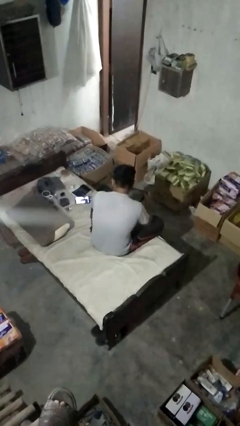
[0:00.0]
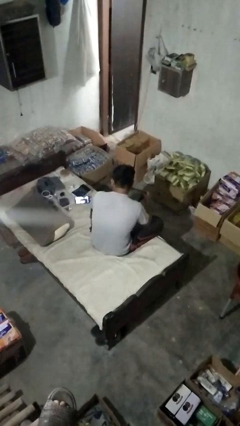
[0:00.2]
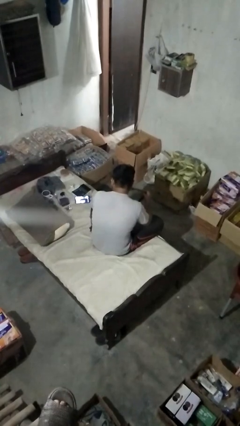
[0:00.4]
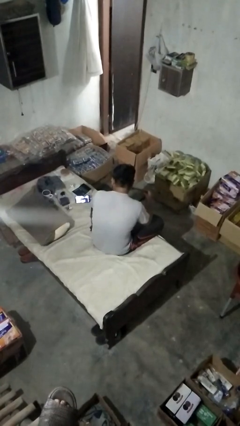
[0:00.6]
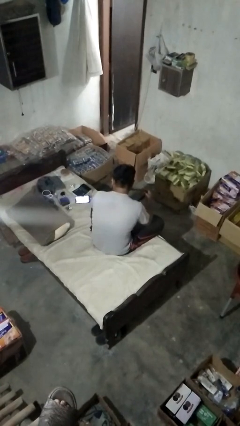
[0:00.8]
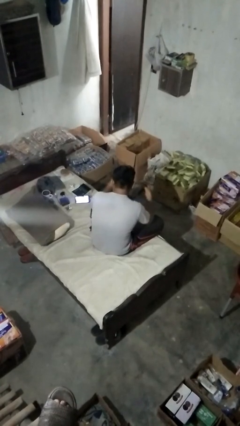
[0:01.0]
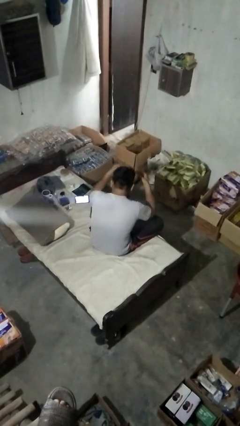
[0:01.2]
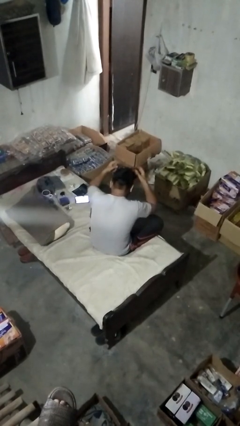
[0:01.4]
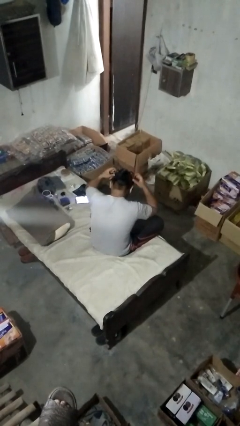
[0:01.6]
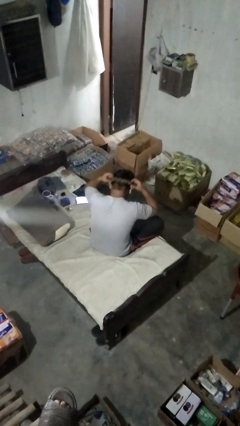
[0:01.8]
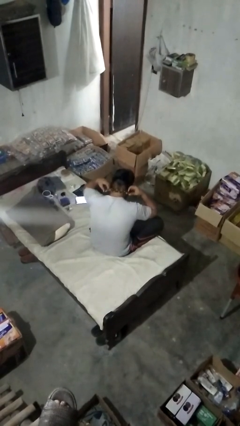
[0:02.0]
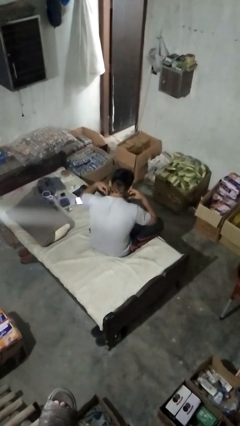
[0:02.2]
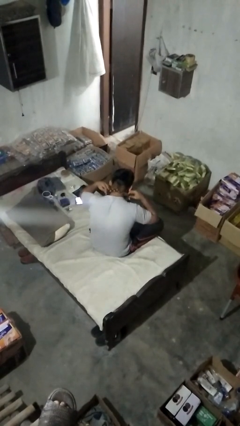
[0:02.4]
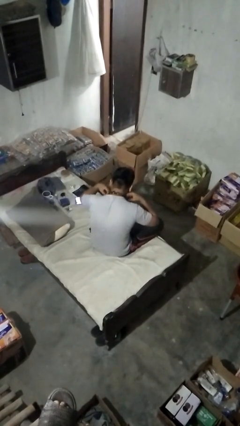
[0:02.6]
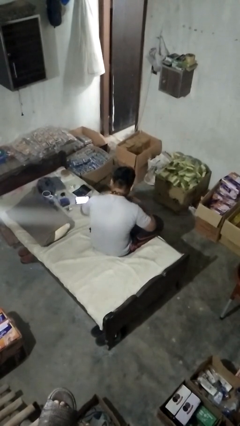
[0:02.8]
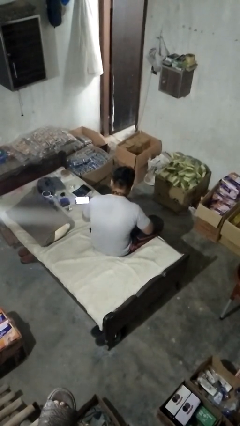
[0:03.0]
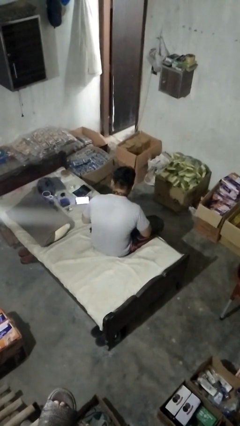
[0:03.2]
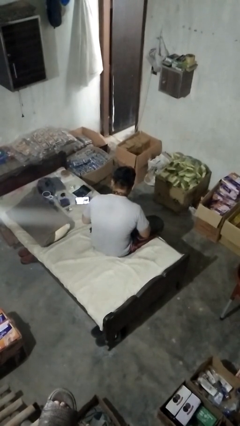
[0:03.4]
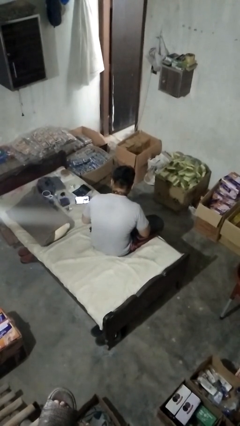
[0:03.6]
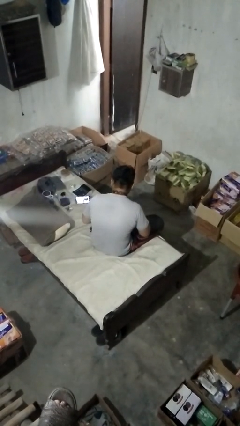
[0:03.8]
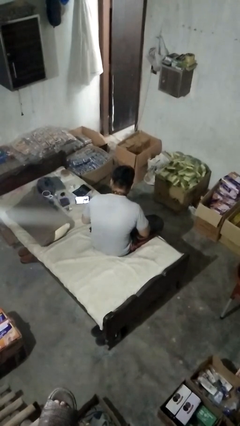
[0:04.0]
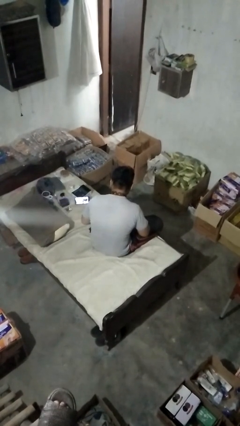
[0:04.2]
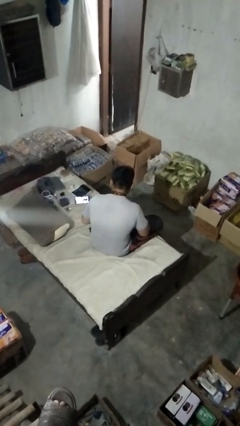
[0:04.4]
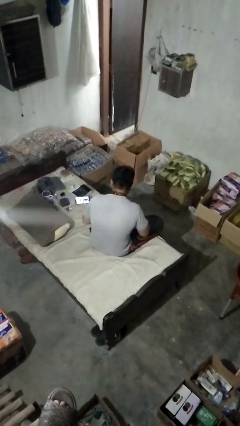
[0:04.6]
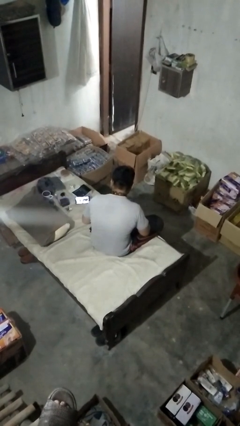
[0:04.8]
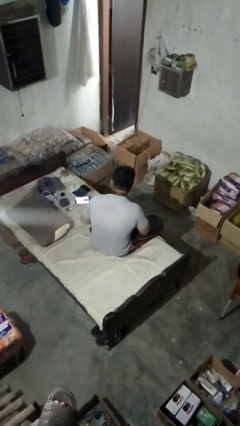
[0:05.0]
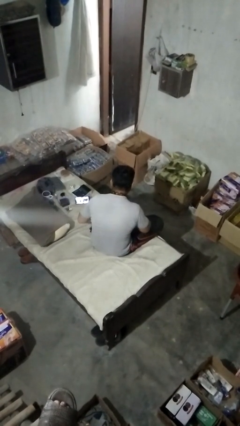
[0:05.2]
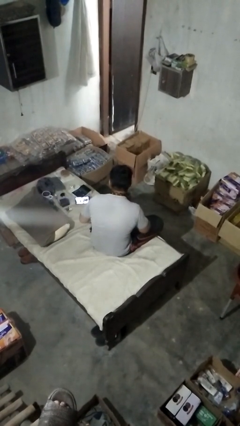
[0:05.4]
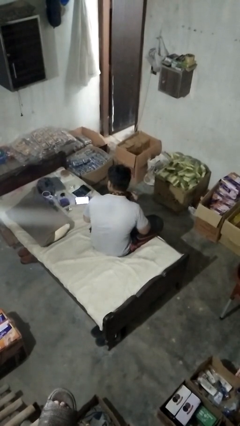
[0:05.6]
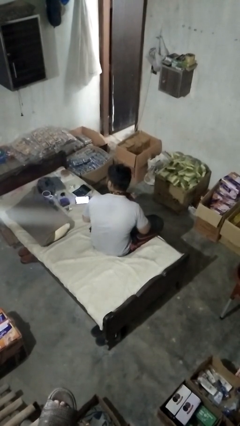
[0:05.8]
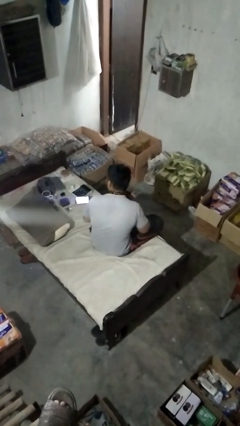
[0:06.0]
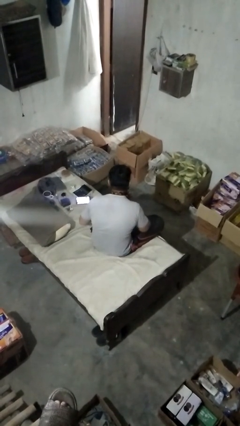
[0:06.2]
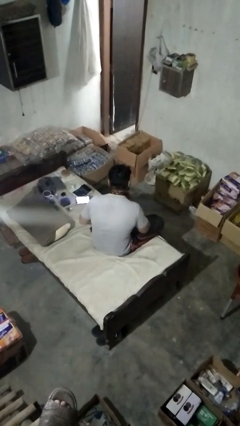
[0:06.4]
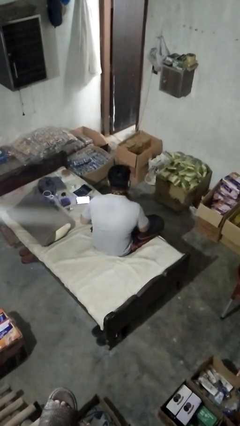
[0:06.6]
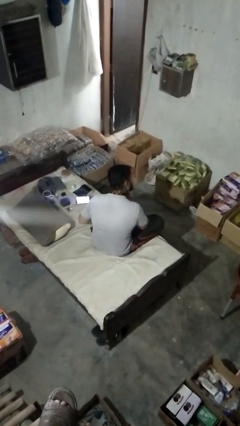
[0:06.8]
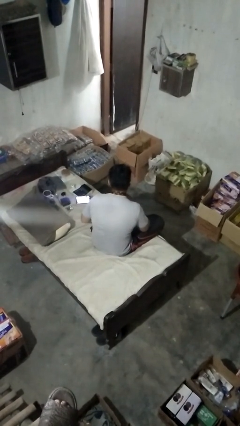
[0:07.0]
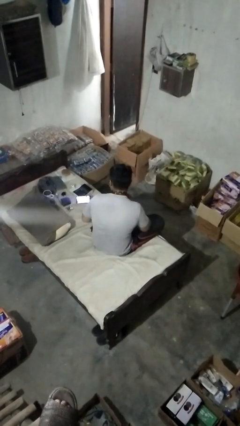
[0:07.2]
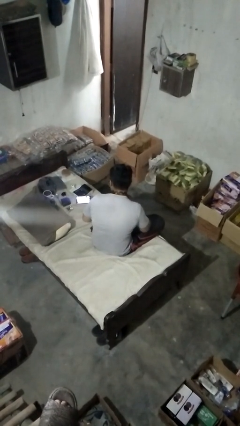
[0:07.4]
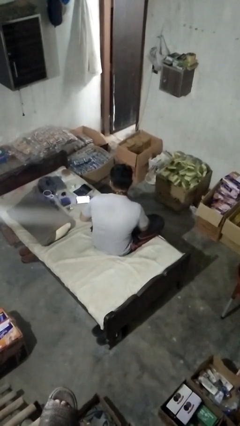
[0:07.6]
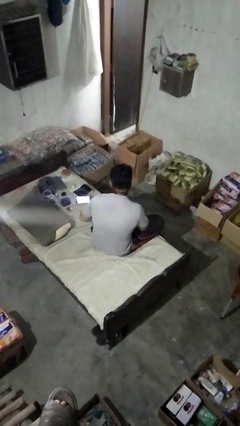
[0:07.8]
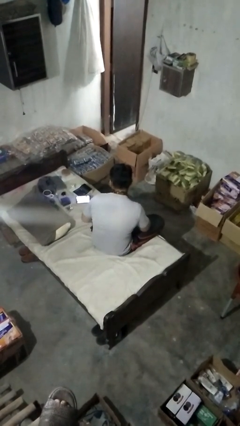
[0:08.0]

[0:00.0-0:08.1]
person puts on necktie

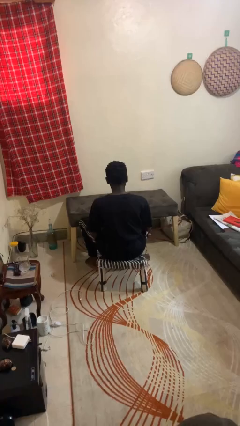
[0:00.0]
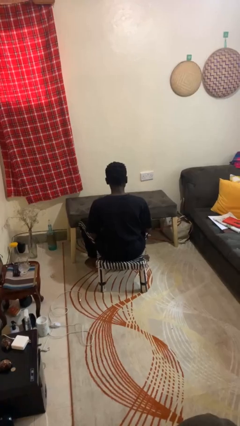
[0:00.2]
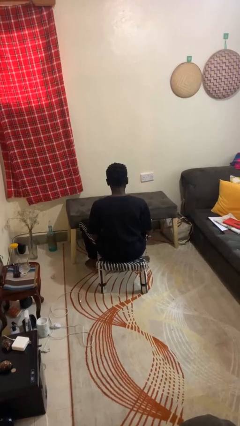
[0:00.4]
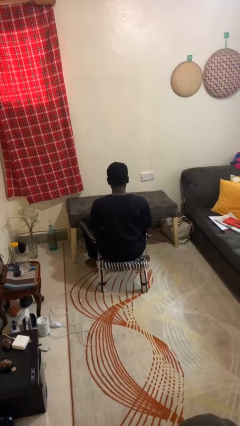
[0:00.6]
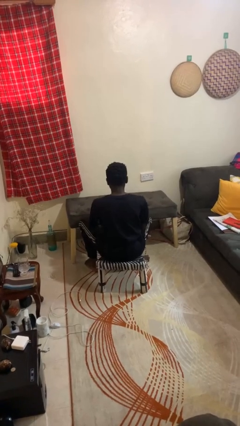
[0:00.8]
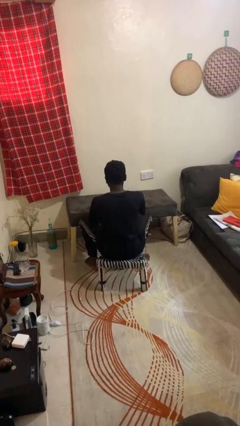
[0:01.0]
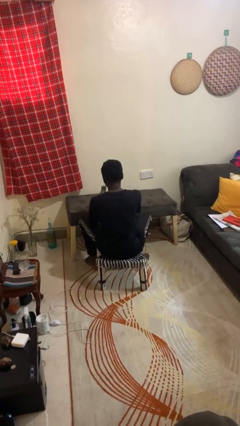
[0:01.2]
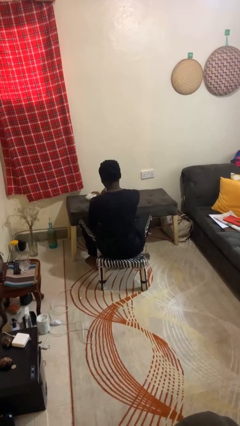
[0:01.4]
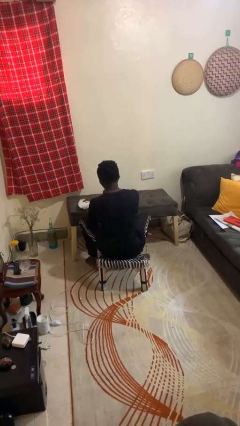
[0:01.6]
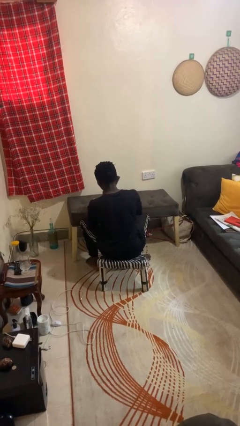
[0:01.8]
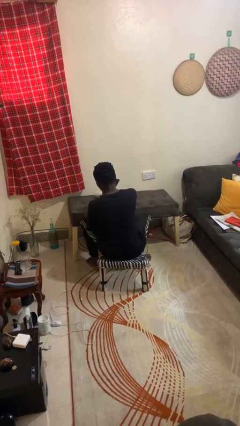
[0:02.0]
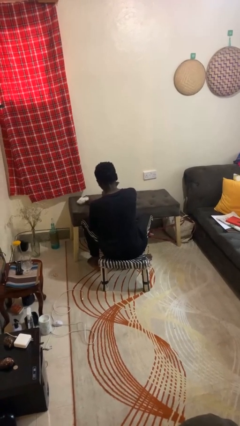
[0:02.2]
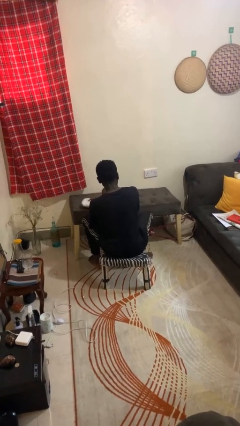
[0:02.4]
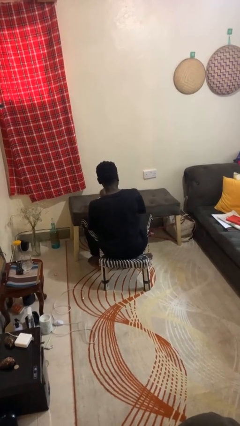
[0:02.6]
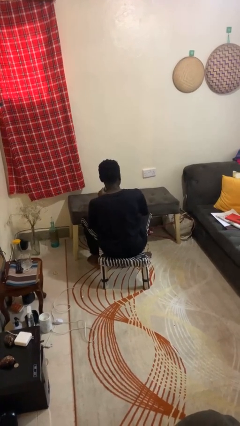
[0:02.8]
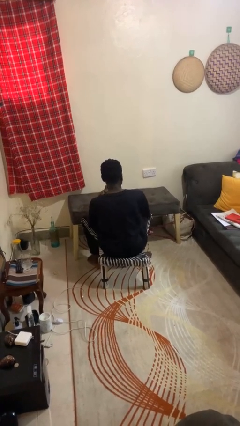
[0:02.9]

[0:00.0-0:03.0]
person cleans table with rag

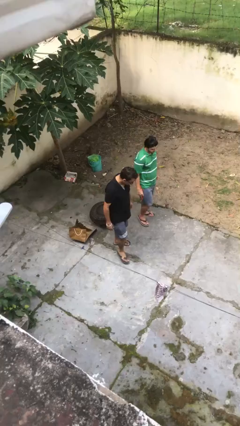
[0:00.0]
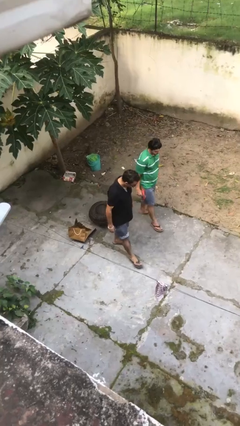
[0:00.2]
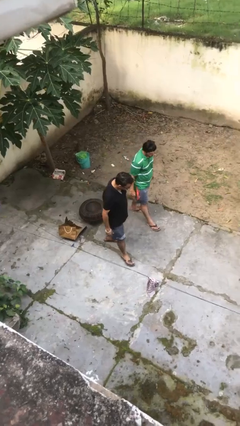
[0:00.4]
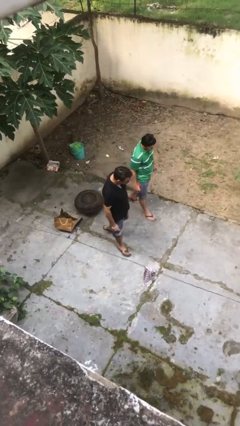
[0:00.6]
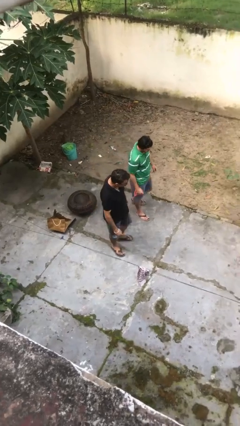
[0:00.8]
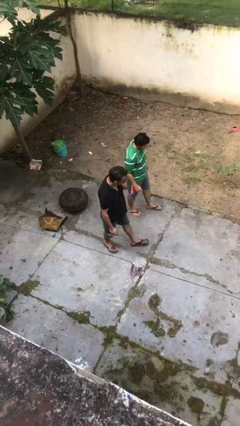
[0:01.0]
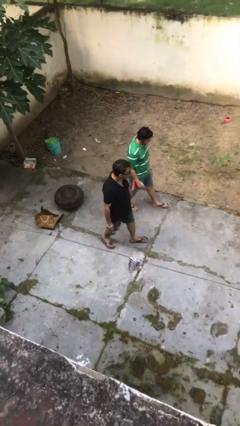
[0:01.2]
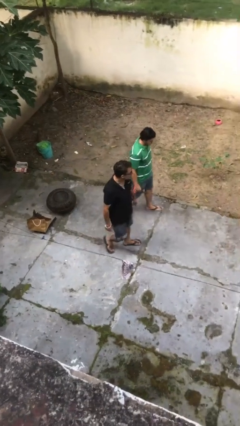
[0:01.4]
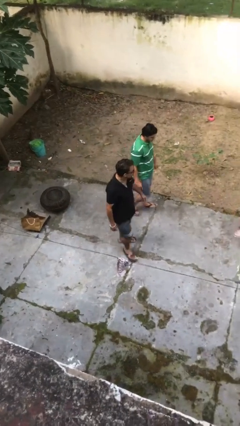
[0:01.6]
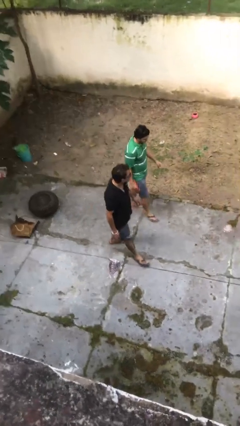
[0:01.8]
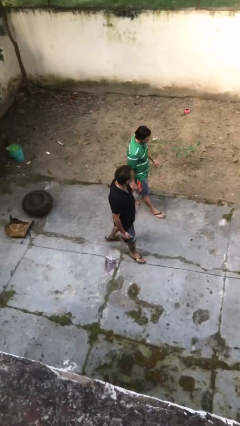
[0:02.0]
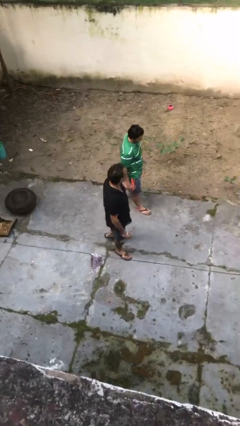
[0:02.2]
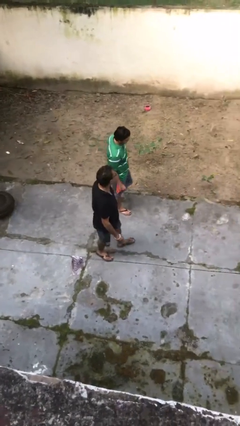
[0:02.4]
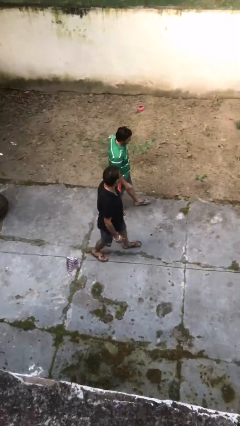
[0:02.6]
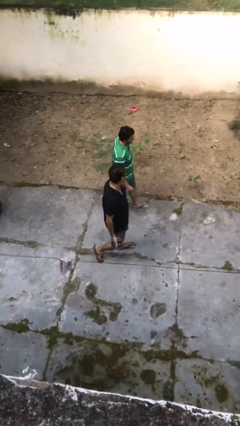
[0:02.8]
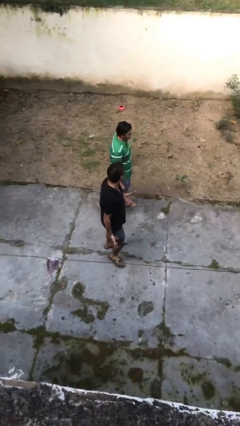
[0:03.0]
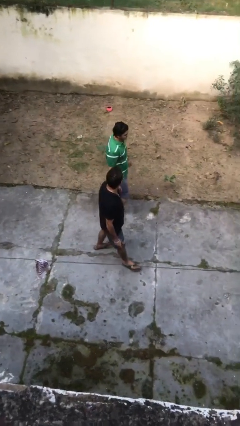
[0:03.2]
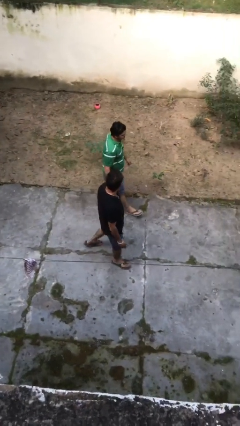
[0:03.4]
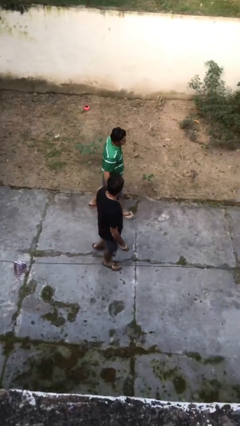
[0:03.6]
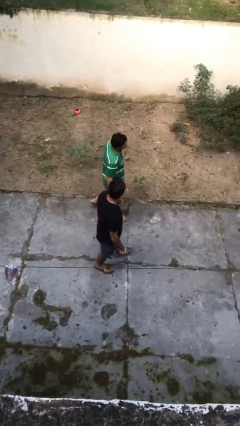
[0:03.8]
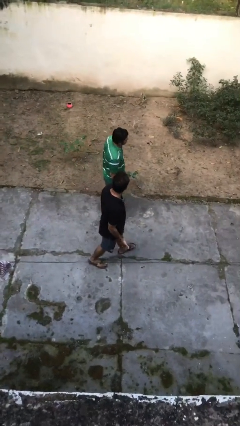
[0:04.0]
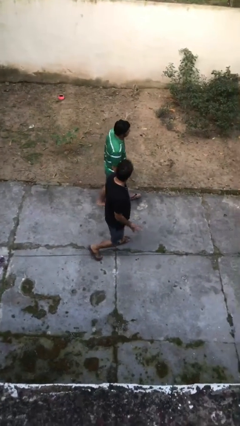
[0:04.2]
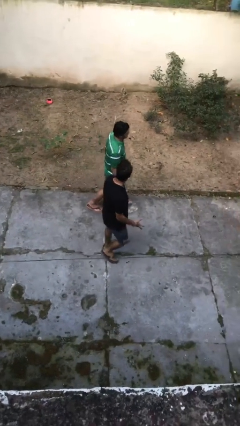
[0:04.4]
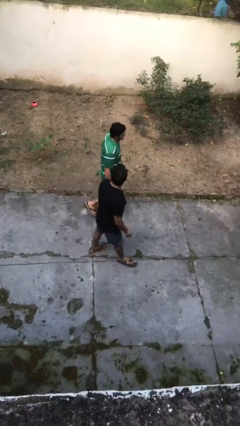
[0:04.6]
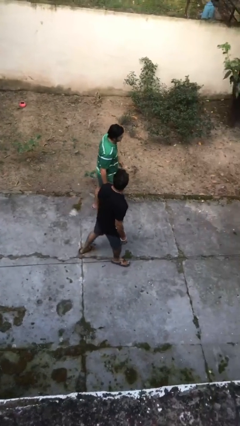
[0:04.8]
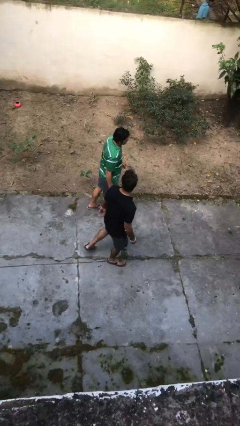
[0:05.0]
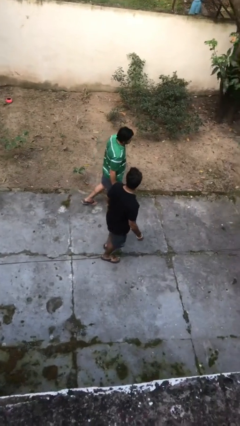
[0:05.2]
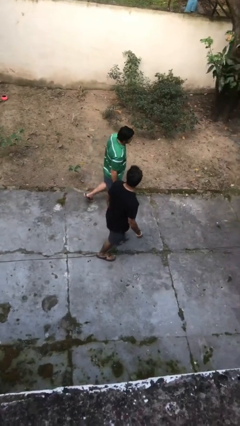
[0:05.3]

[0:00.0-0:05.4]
person talks to person

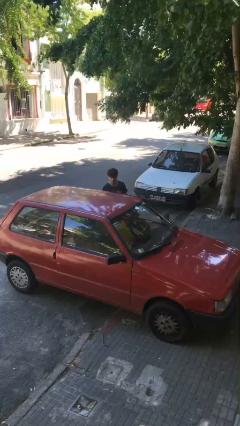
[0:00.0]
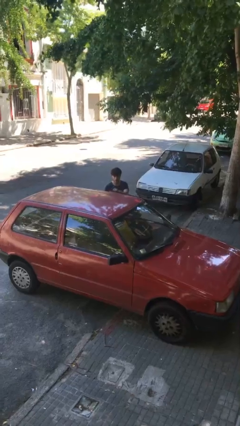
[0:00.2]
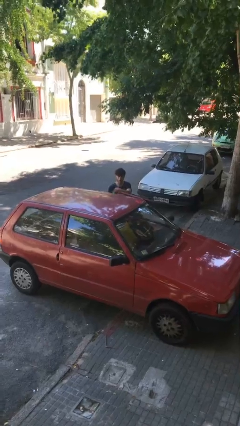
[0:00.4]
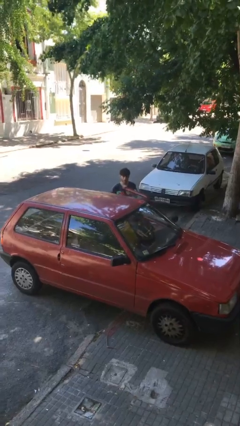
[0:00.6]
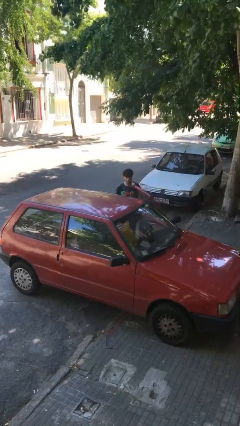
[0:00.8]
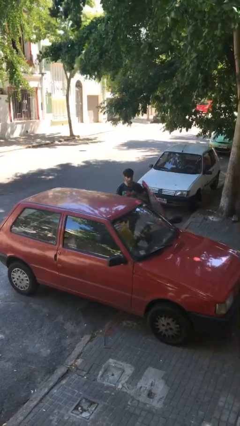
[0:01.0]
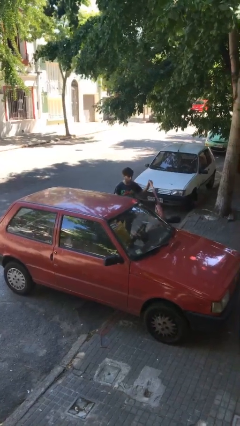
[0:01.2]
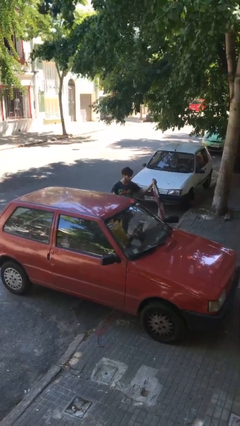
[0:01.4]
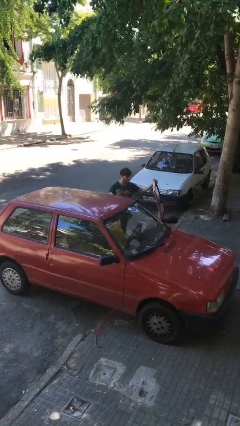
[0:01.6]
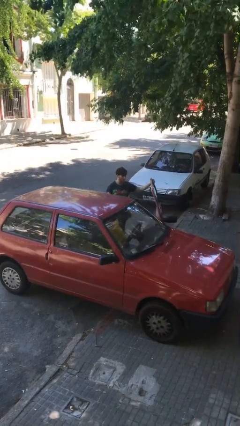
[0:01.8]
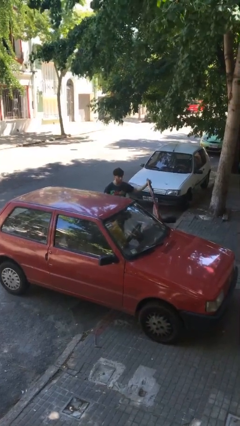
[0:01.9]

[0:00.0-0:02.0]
person opens car door
